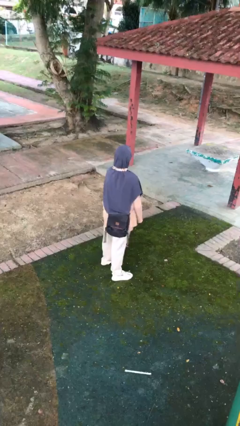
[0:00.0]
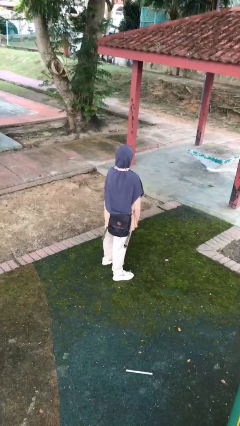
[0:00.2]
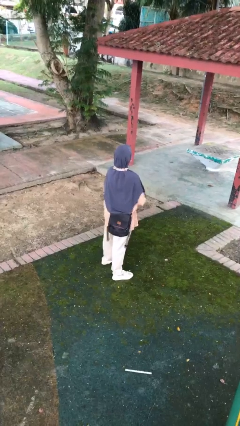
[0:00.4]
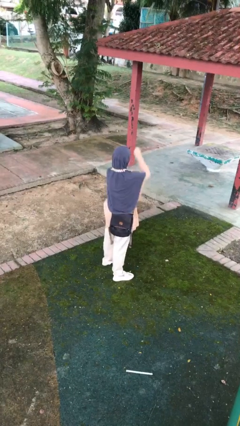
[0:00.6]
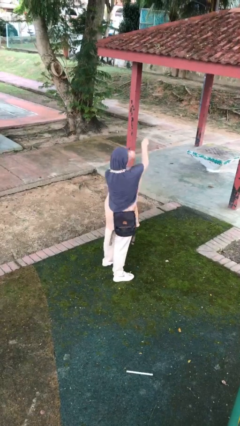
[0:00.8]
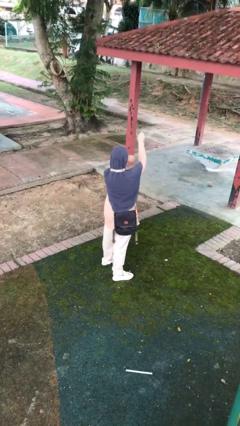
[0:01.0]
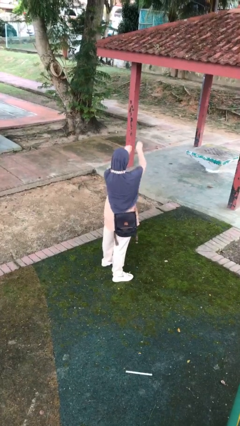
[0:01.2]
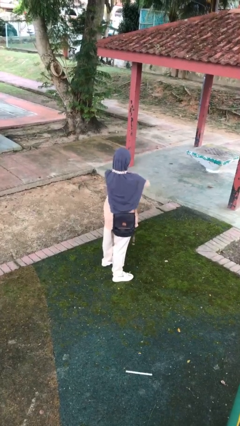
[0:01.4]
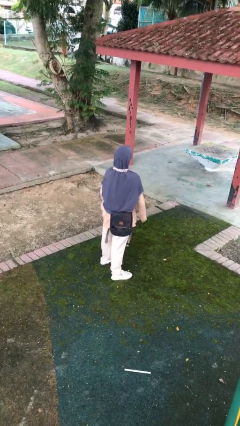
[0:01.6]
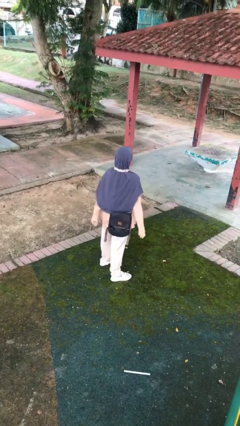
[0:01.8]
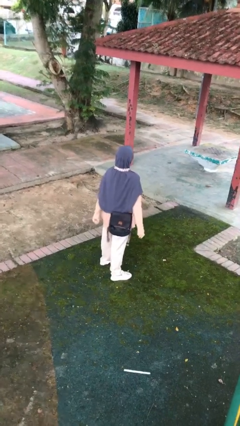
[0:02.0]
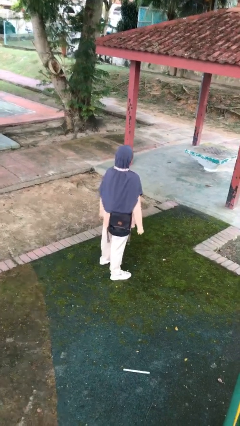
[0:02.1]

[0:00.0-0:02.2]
person punches

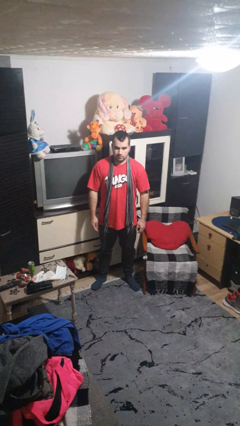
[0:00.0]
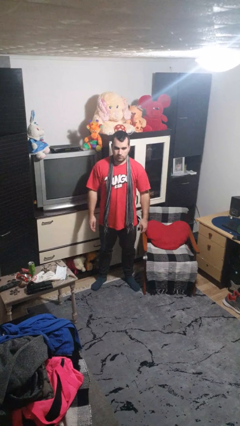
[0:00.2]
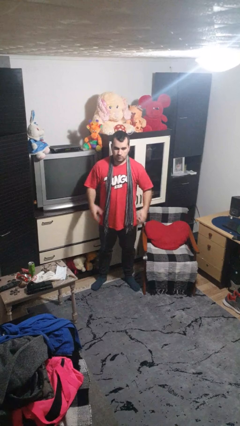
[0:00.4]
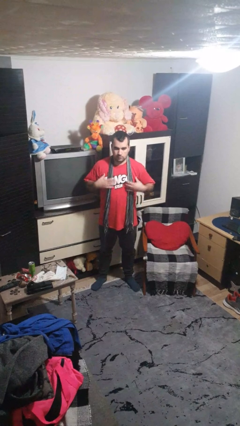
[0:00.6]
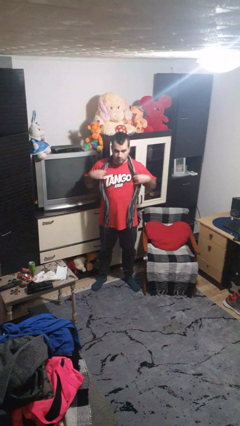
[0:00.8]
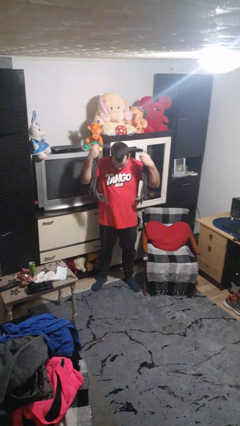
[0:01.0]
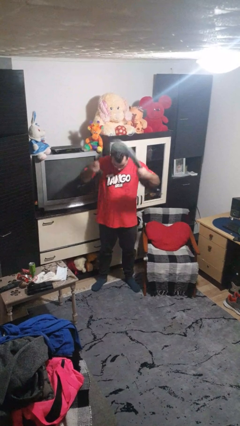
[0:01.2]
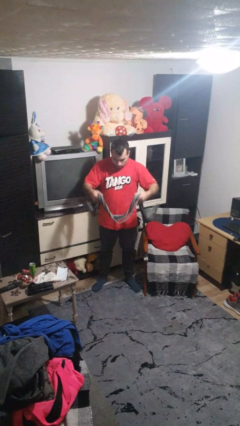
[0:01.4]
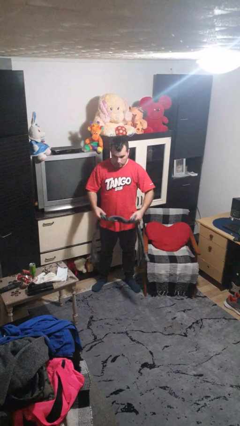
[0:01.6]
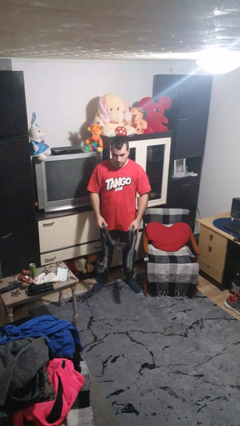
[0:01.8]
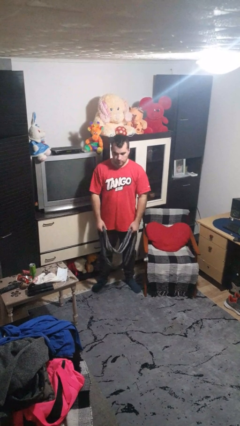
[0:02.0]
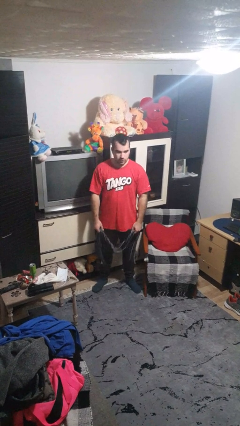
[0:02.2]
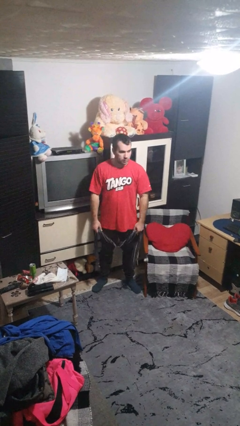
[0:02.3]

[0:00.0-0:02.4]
person takes off scarf

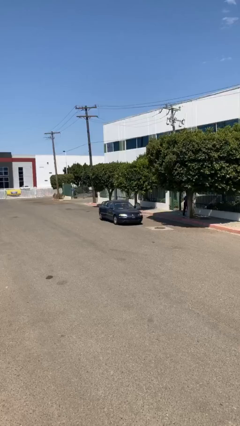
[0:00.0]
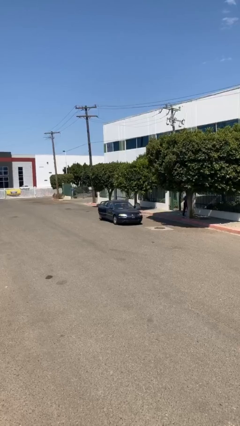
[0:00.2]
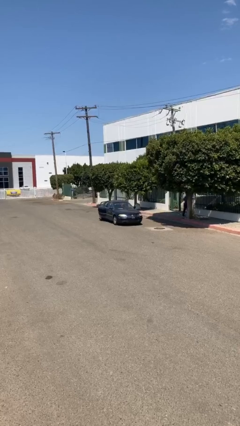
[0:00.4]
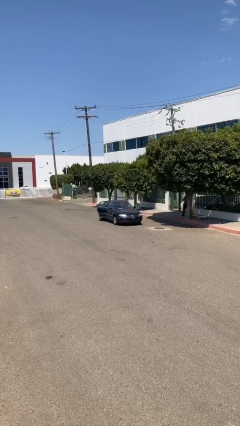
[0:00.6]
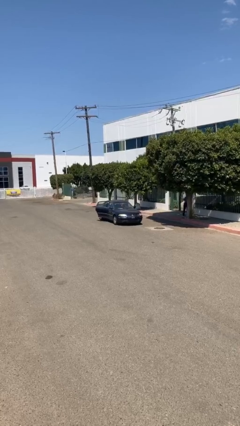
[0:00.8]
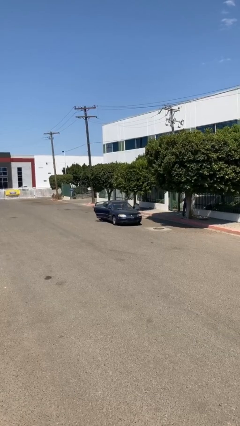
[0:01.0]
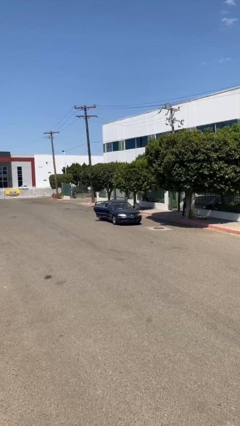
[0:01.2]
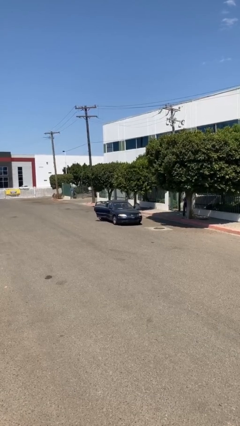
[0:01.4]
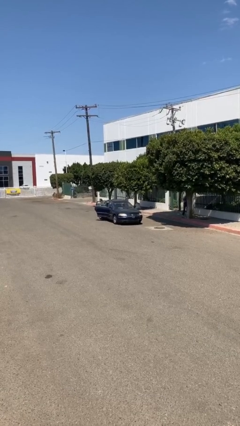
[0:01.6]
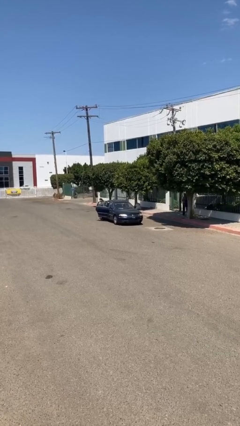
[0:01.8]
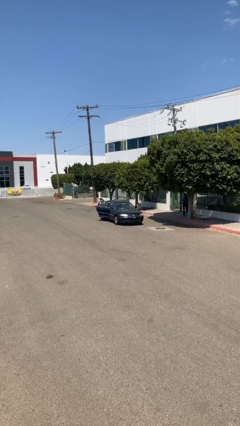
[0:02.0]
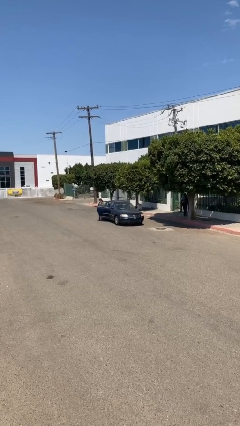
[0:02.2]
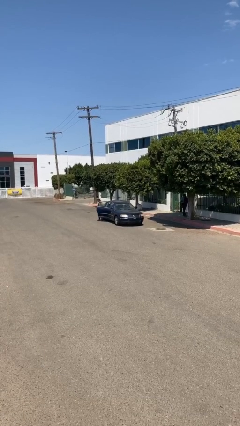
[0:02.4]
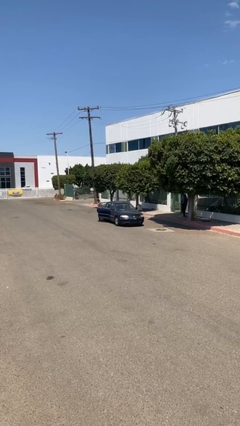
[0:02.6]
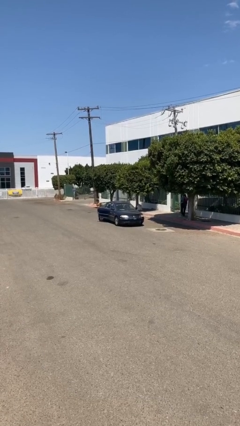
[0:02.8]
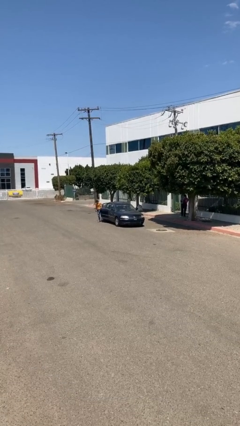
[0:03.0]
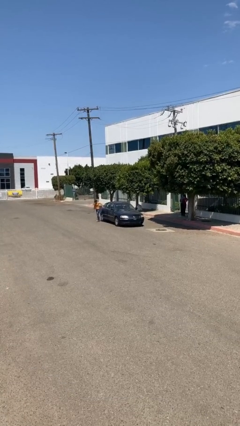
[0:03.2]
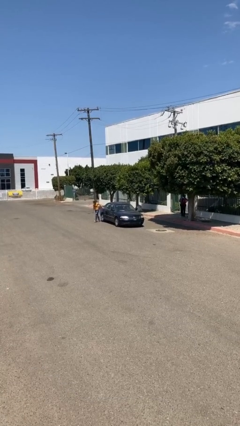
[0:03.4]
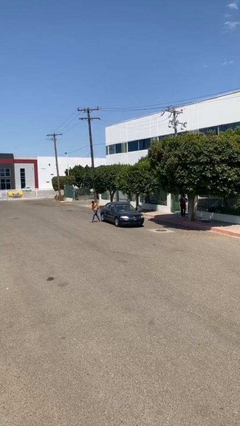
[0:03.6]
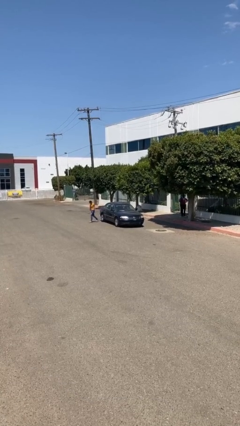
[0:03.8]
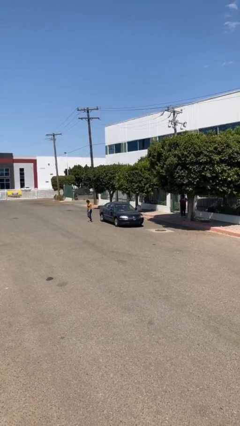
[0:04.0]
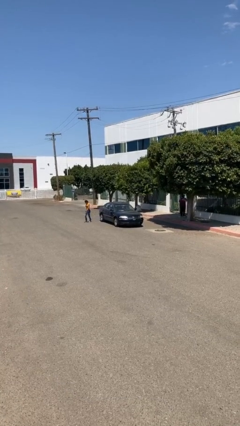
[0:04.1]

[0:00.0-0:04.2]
car drops off person

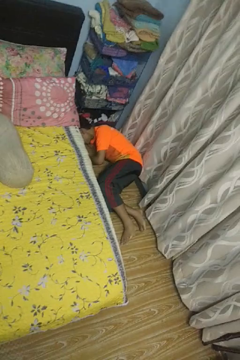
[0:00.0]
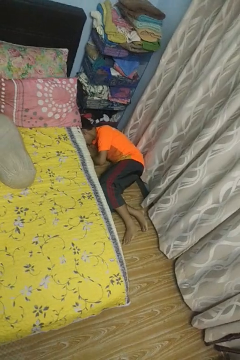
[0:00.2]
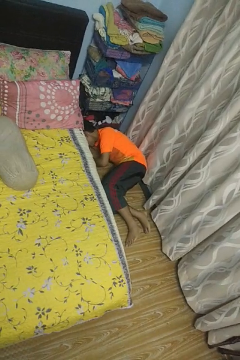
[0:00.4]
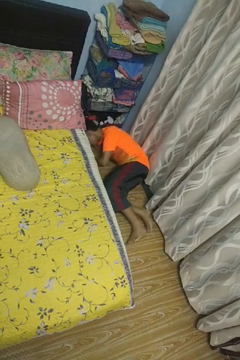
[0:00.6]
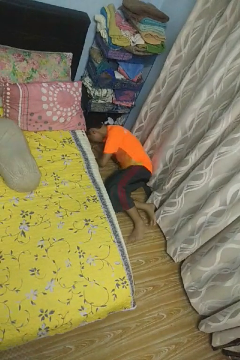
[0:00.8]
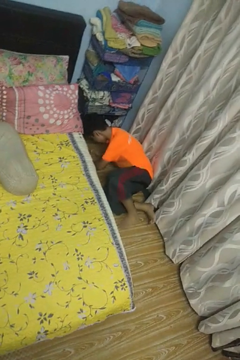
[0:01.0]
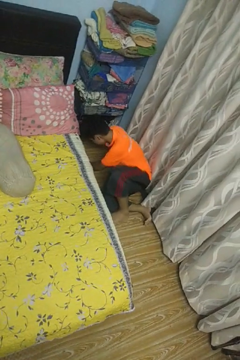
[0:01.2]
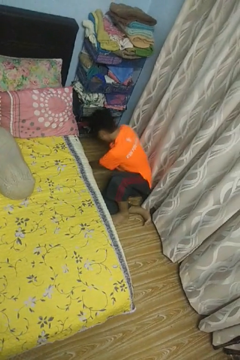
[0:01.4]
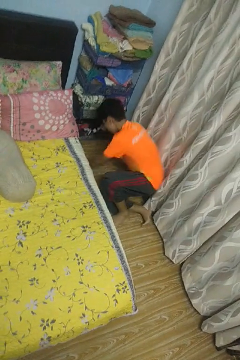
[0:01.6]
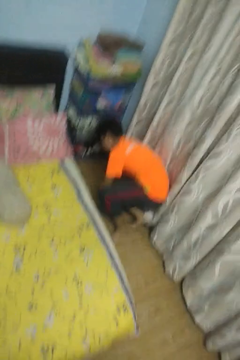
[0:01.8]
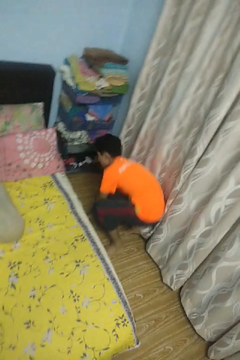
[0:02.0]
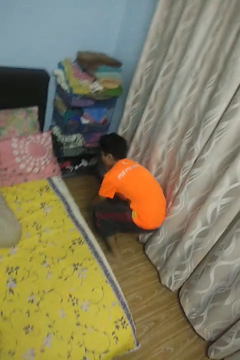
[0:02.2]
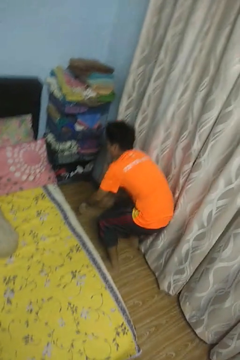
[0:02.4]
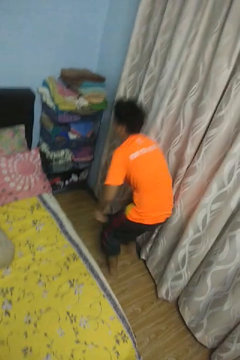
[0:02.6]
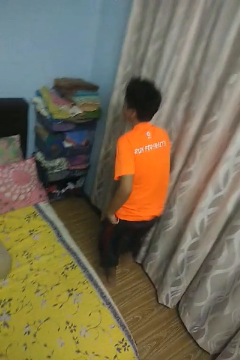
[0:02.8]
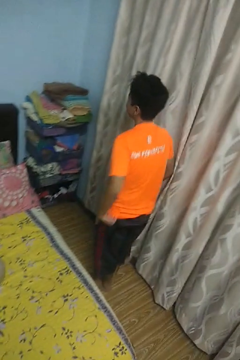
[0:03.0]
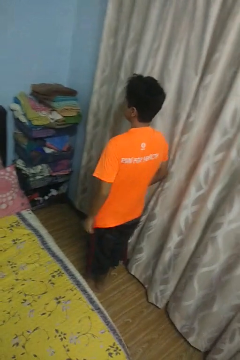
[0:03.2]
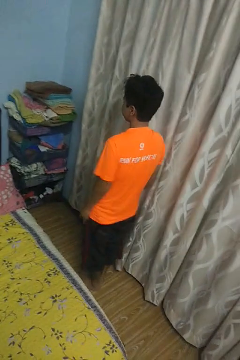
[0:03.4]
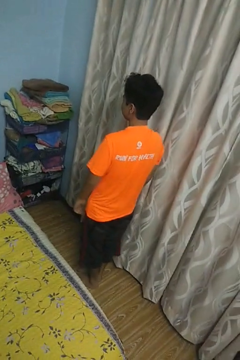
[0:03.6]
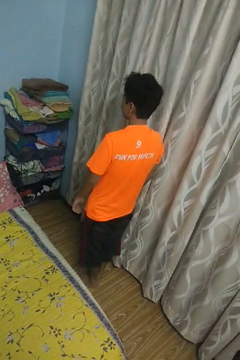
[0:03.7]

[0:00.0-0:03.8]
person stands up from floor

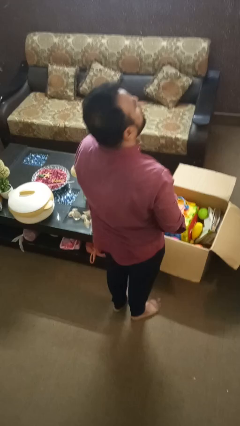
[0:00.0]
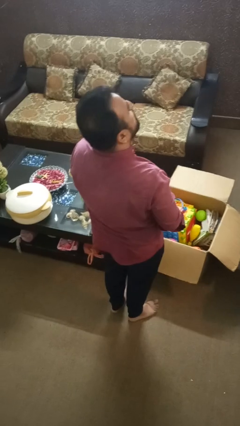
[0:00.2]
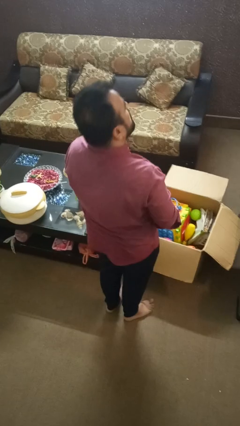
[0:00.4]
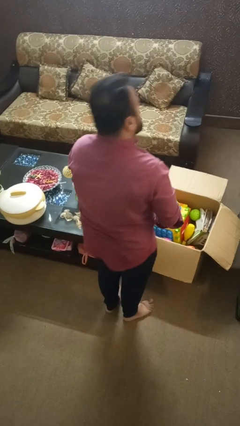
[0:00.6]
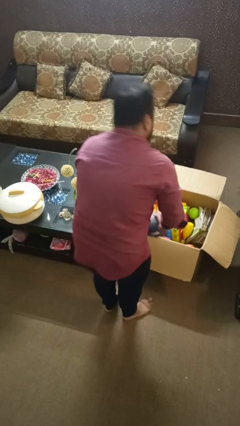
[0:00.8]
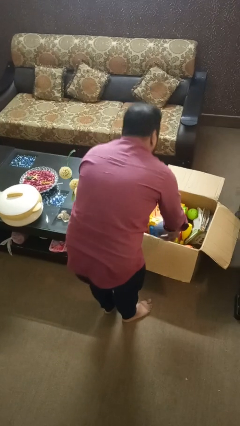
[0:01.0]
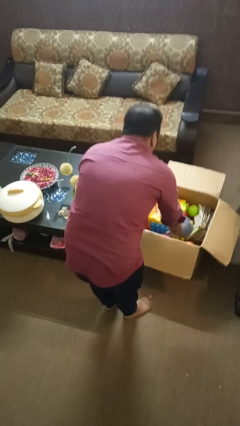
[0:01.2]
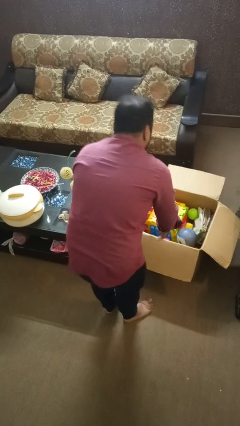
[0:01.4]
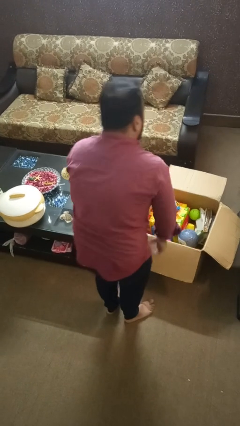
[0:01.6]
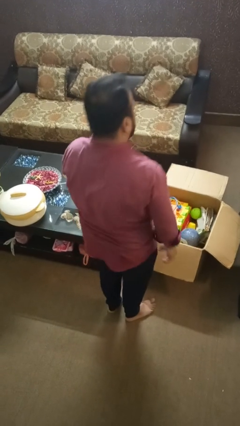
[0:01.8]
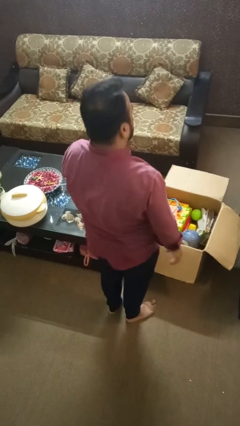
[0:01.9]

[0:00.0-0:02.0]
person puts object into box

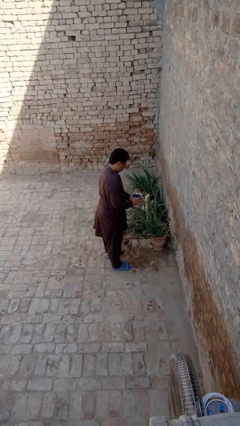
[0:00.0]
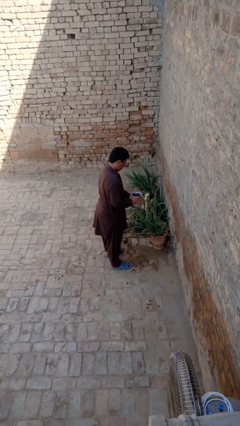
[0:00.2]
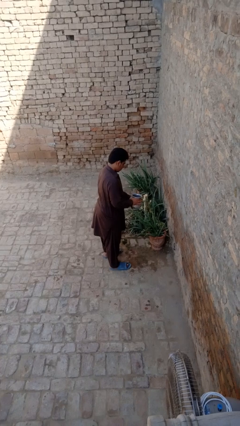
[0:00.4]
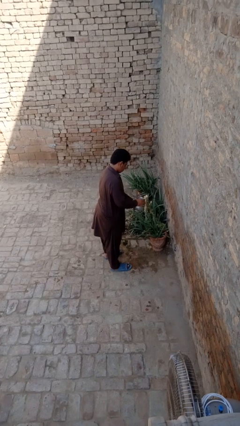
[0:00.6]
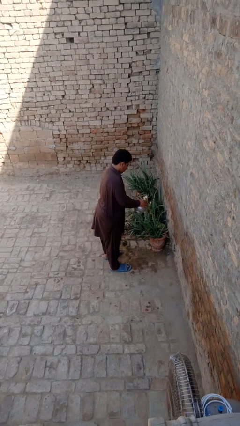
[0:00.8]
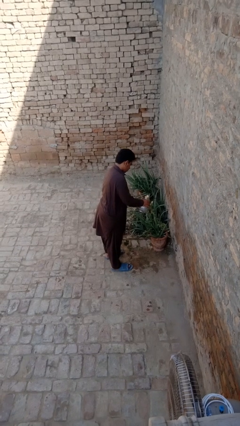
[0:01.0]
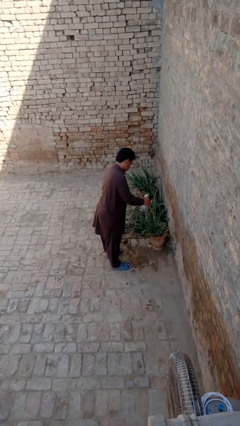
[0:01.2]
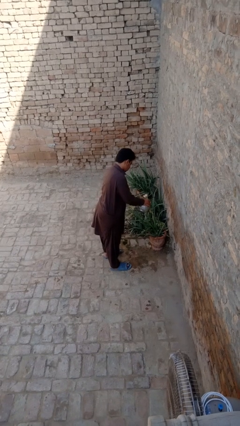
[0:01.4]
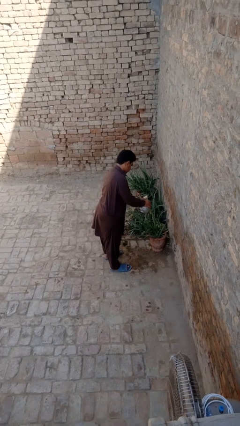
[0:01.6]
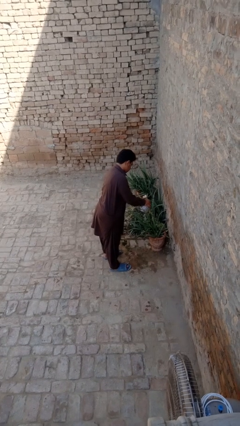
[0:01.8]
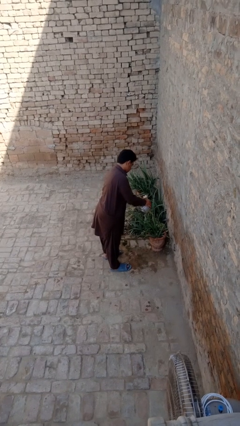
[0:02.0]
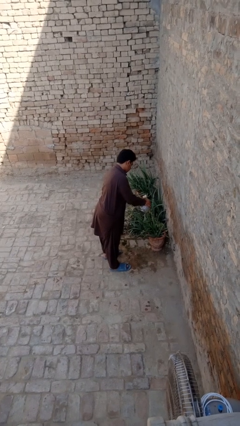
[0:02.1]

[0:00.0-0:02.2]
person waters houseplant

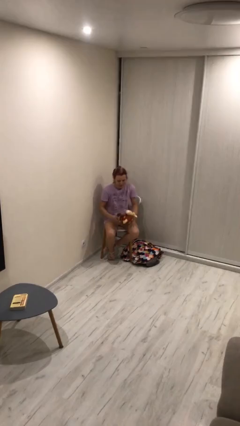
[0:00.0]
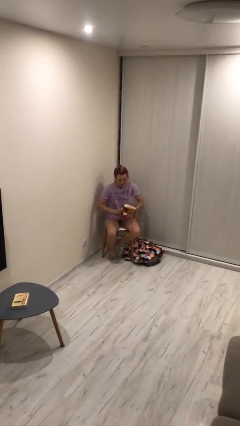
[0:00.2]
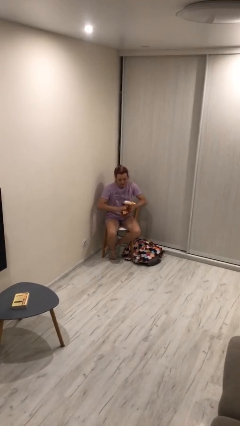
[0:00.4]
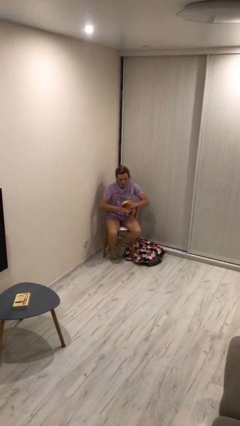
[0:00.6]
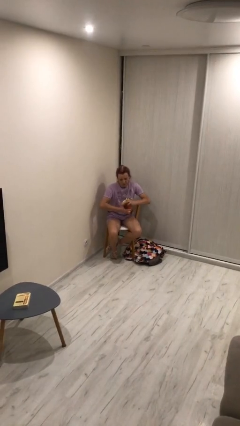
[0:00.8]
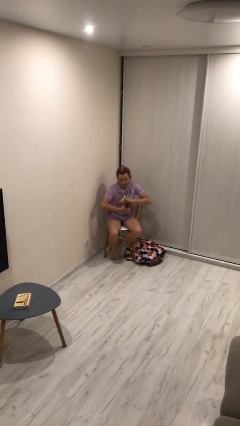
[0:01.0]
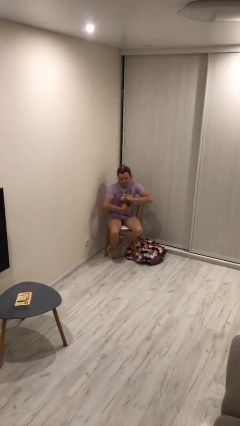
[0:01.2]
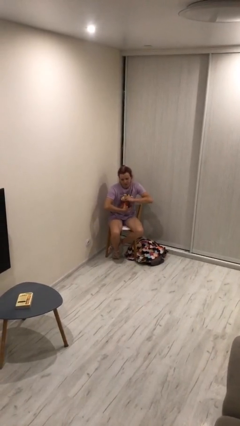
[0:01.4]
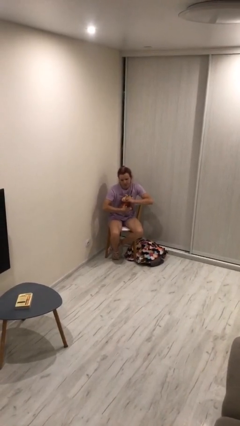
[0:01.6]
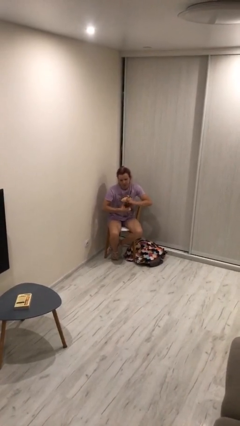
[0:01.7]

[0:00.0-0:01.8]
person squeezes object
